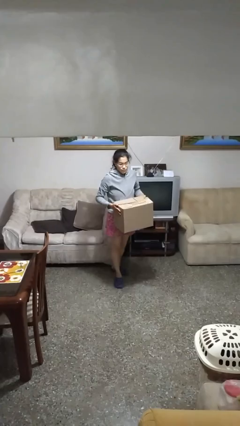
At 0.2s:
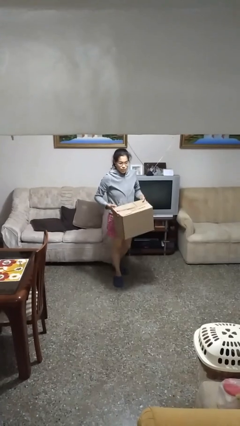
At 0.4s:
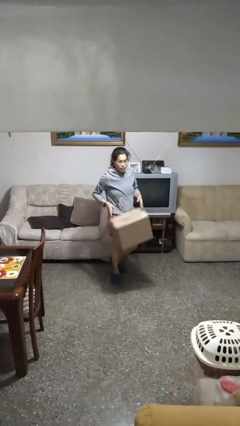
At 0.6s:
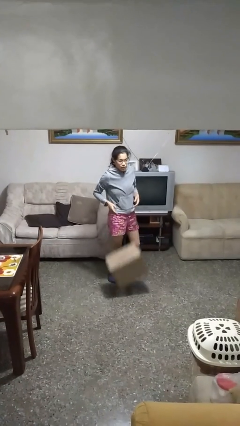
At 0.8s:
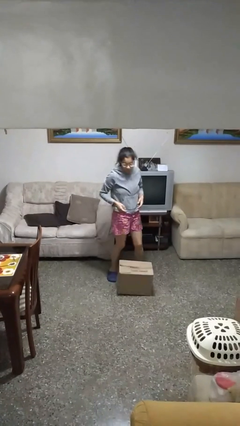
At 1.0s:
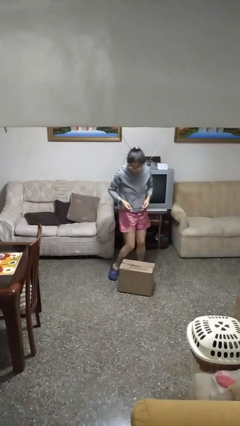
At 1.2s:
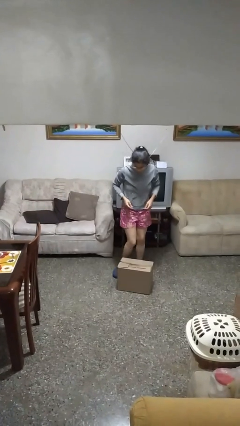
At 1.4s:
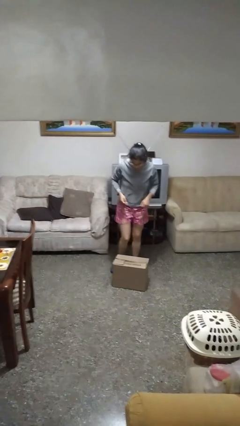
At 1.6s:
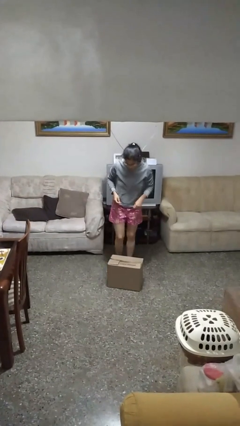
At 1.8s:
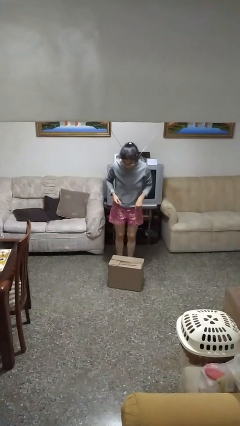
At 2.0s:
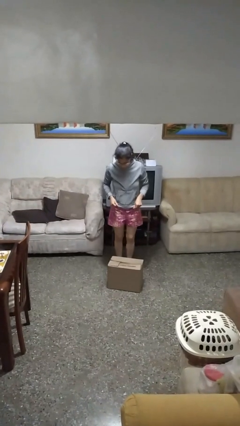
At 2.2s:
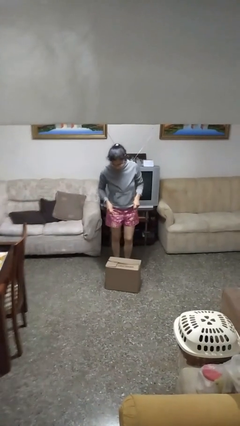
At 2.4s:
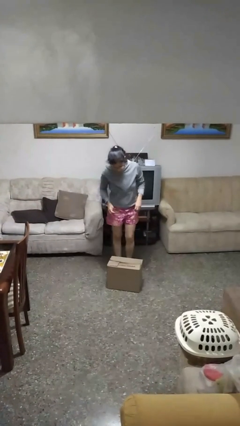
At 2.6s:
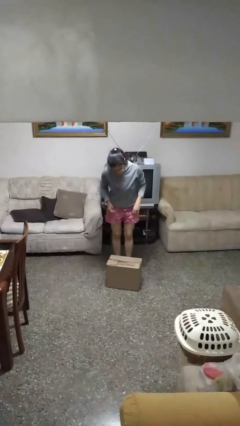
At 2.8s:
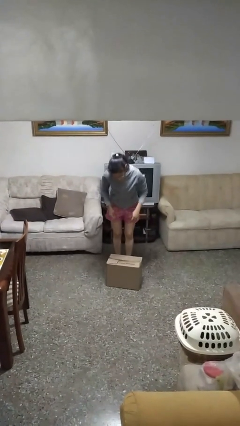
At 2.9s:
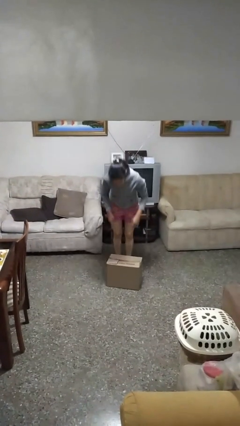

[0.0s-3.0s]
person drops object

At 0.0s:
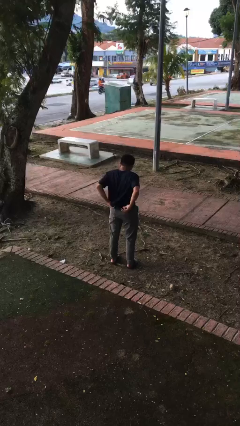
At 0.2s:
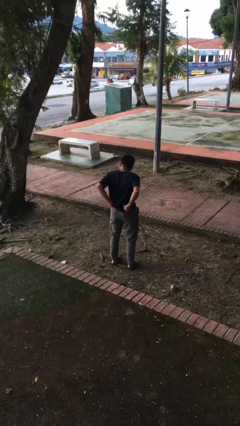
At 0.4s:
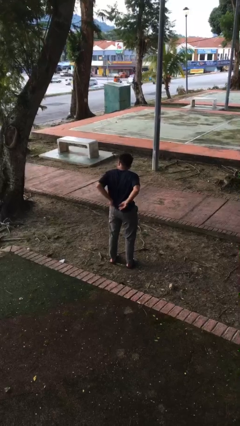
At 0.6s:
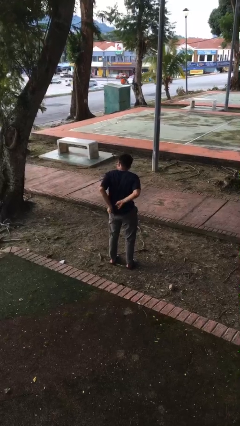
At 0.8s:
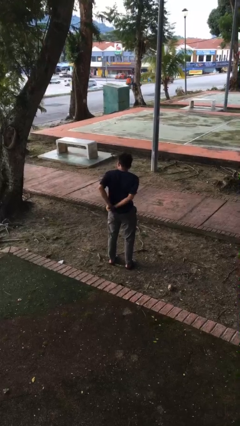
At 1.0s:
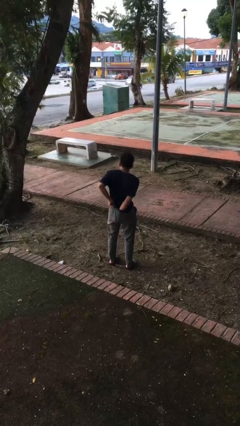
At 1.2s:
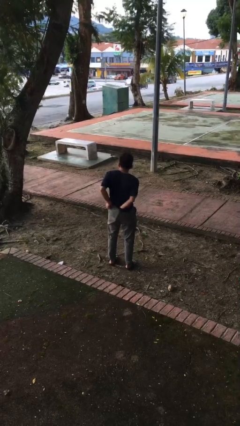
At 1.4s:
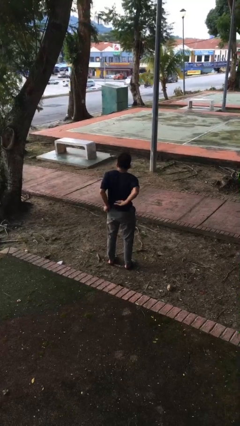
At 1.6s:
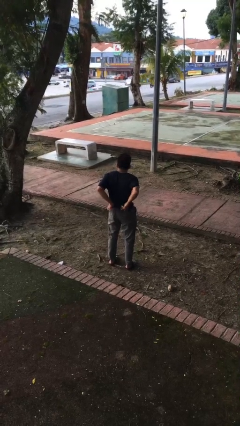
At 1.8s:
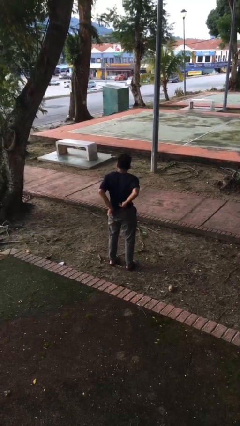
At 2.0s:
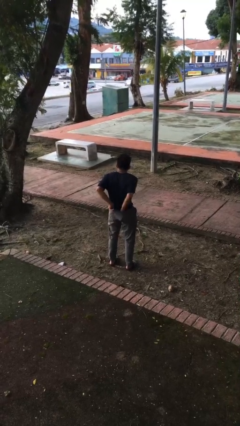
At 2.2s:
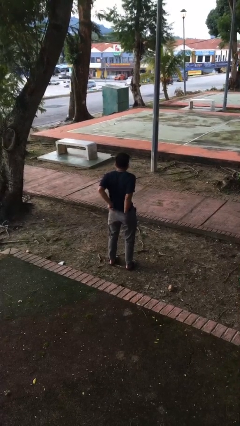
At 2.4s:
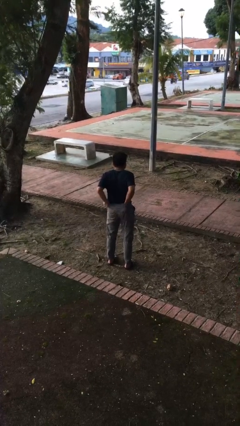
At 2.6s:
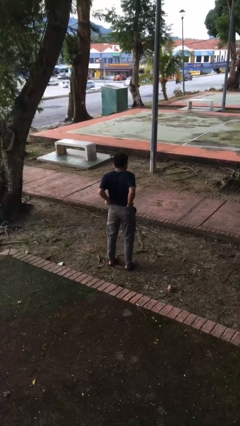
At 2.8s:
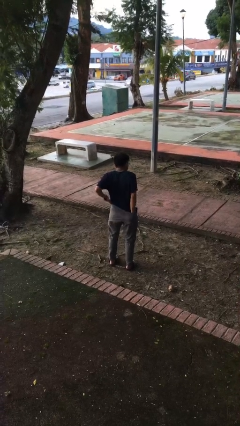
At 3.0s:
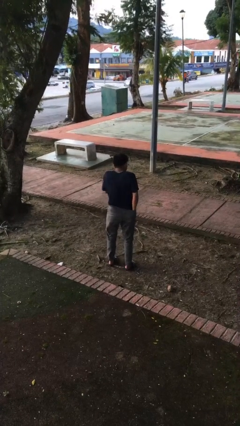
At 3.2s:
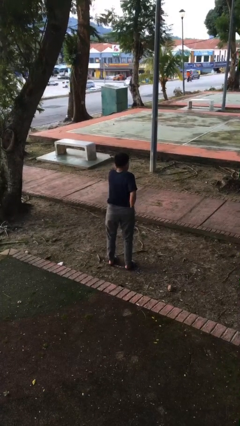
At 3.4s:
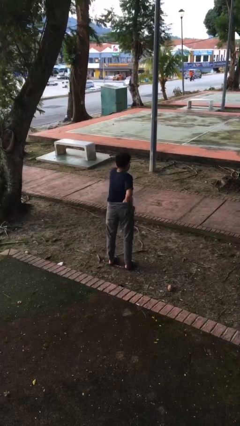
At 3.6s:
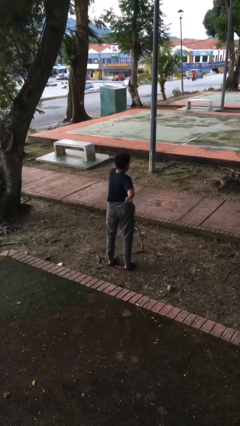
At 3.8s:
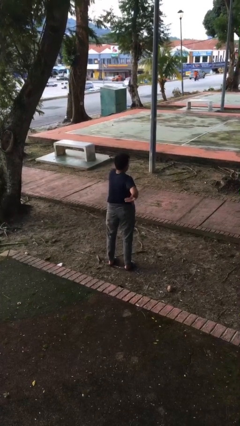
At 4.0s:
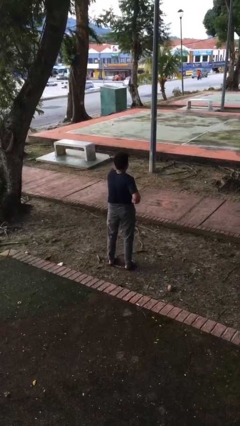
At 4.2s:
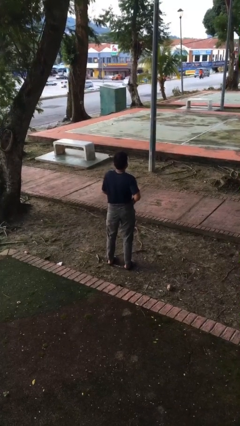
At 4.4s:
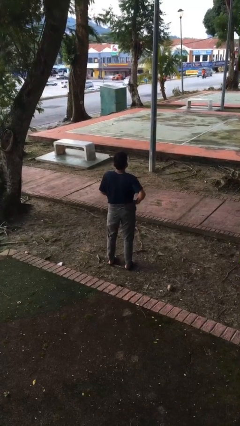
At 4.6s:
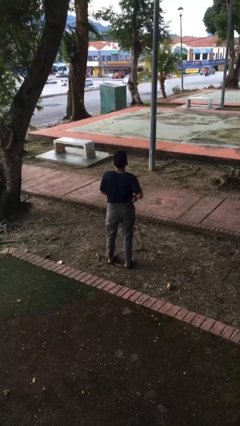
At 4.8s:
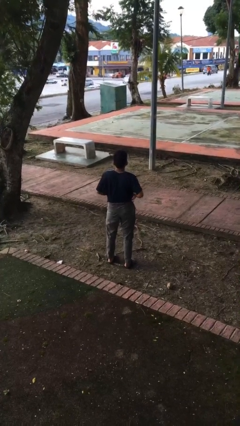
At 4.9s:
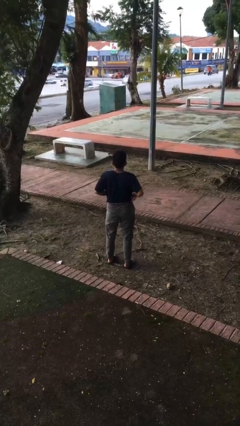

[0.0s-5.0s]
person tucks in shirt

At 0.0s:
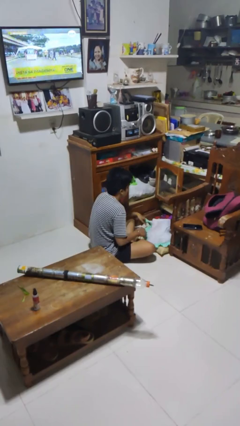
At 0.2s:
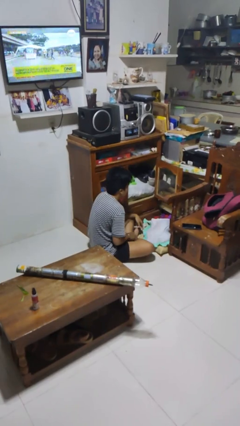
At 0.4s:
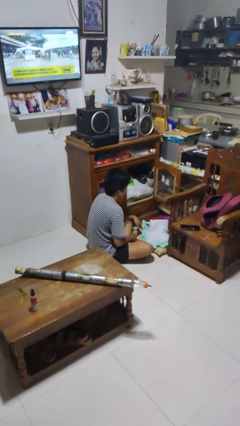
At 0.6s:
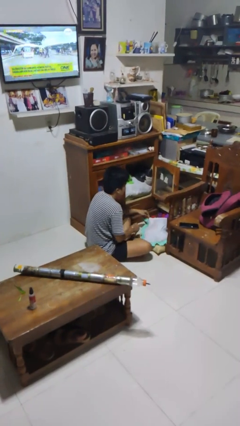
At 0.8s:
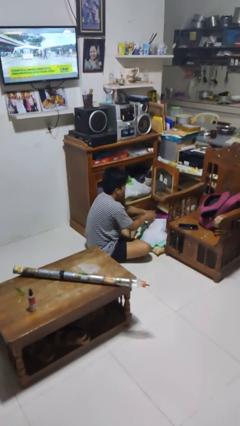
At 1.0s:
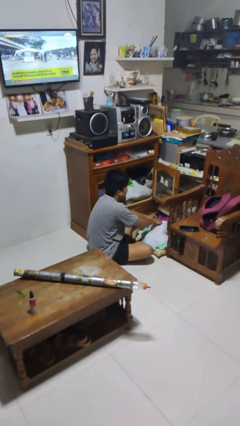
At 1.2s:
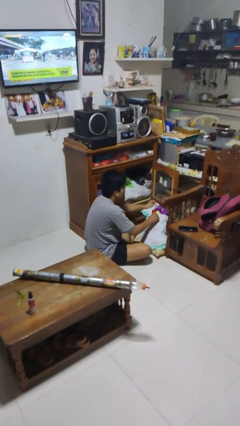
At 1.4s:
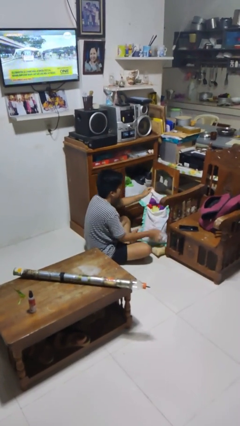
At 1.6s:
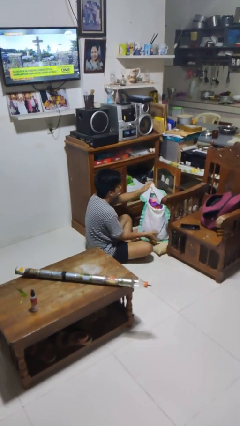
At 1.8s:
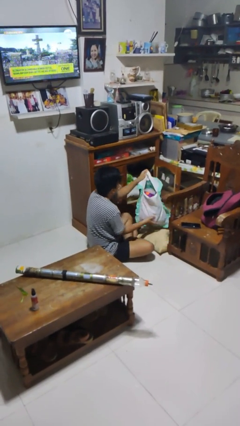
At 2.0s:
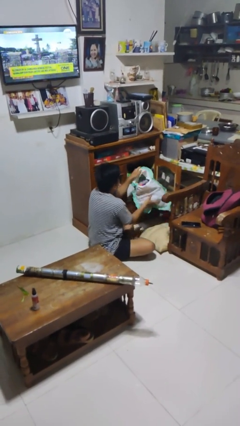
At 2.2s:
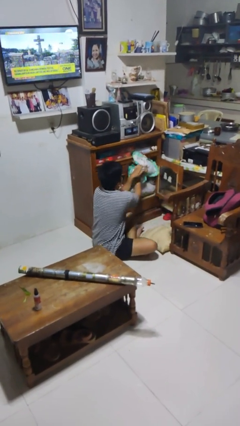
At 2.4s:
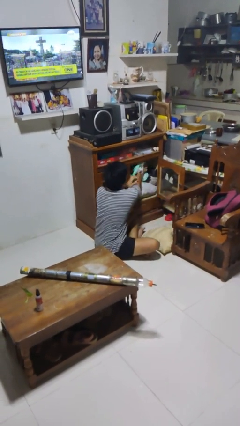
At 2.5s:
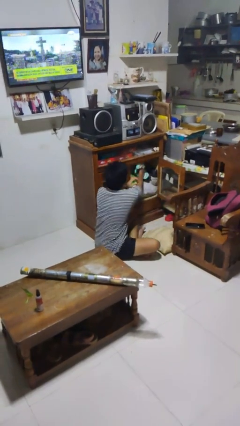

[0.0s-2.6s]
person takes clothes from dresser

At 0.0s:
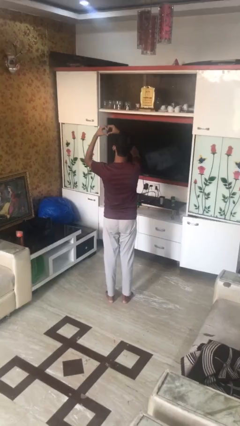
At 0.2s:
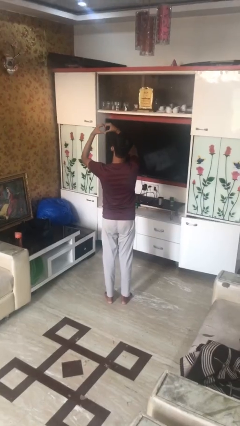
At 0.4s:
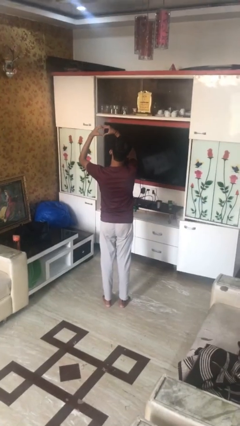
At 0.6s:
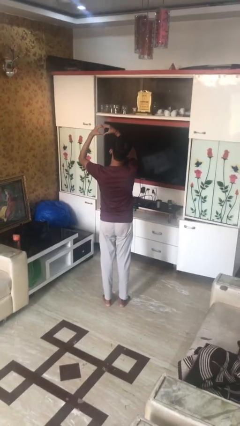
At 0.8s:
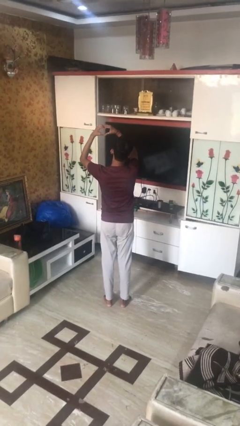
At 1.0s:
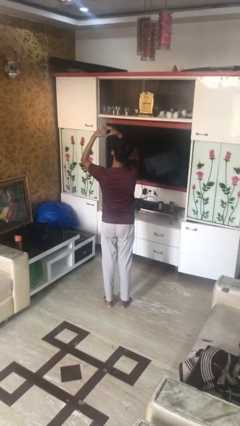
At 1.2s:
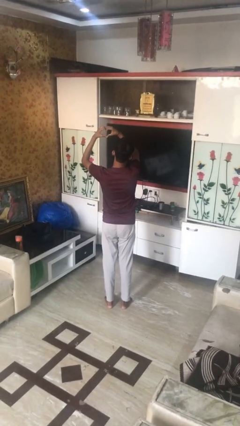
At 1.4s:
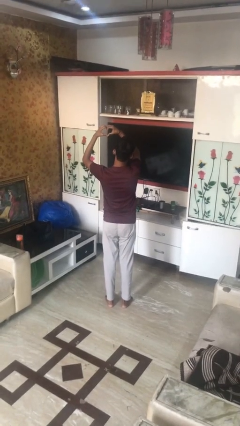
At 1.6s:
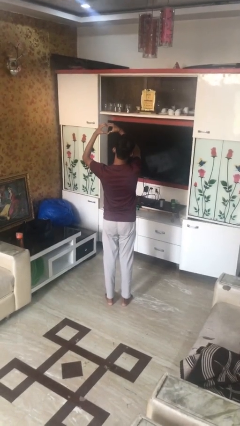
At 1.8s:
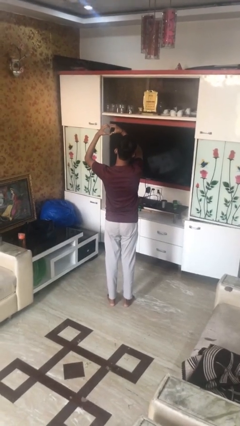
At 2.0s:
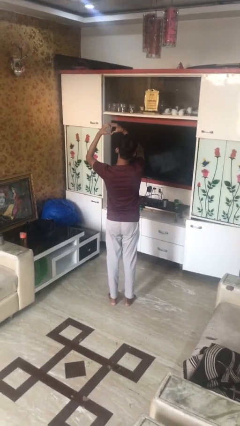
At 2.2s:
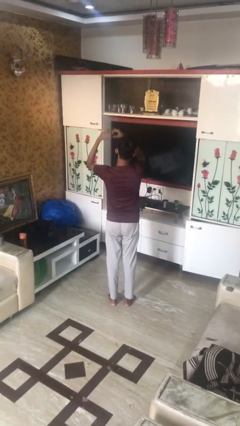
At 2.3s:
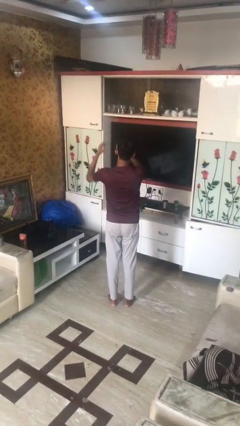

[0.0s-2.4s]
person gestures heart

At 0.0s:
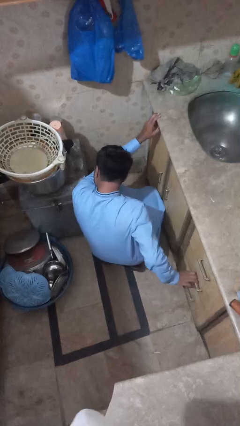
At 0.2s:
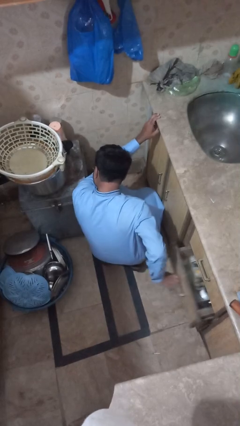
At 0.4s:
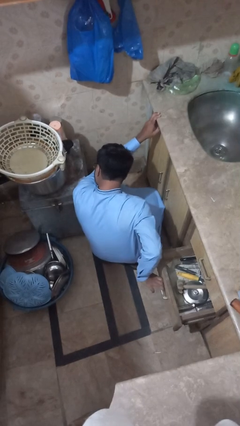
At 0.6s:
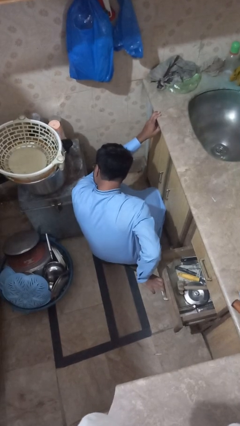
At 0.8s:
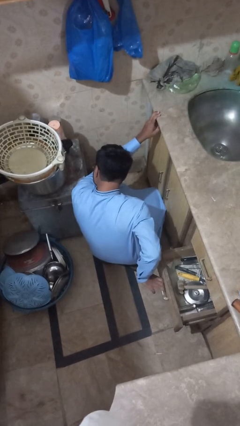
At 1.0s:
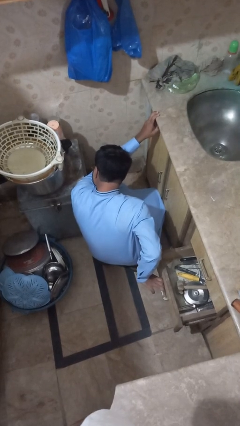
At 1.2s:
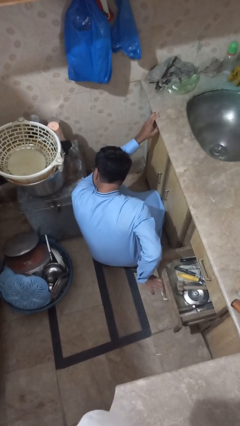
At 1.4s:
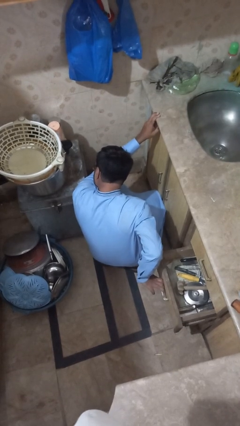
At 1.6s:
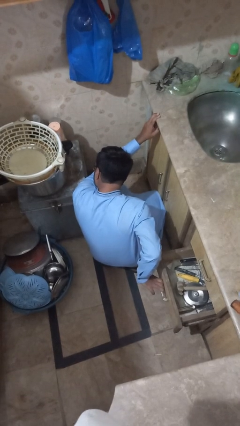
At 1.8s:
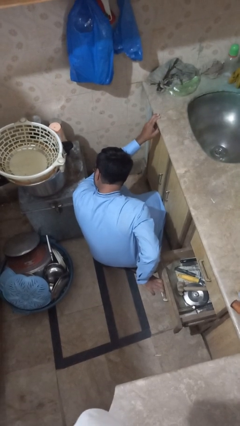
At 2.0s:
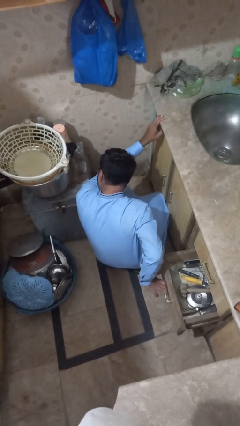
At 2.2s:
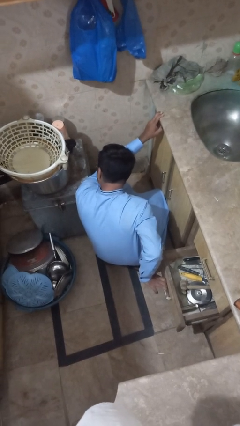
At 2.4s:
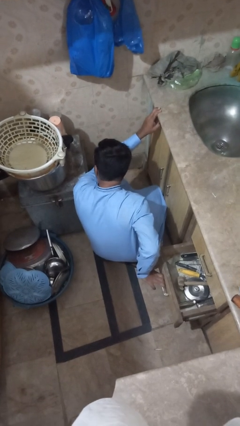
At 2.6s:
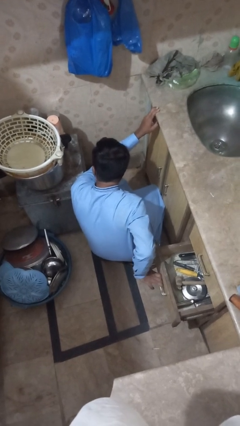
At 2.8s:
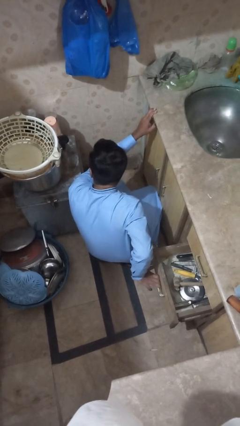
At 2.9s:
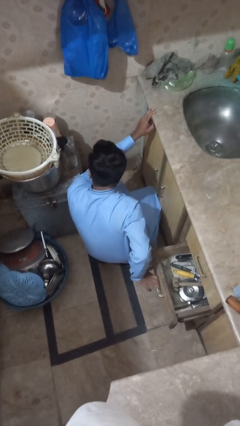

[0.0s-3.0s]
person opens kitchen drawer

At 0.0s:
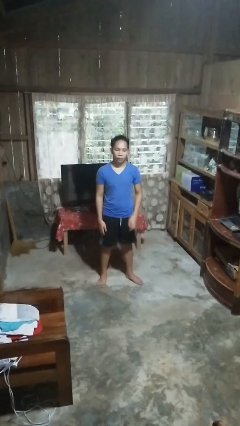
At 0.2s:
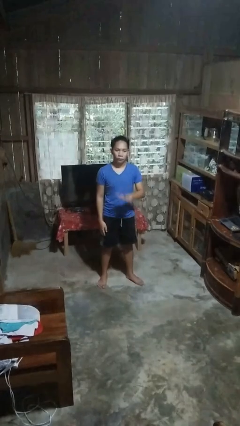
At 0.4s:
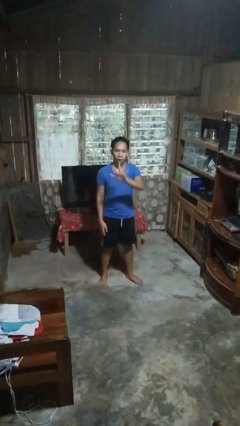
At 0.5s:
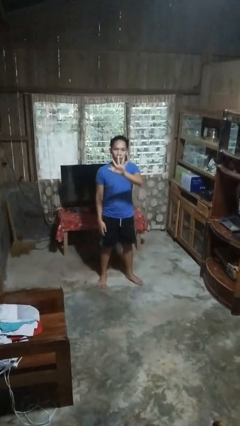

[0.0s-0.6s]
person gestures number five

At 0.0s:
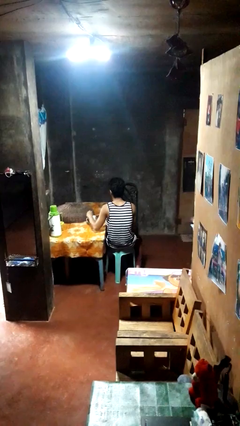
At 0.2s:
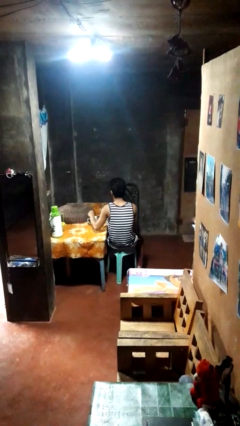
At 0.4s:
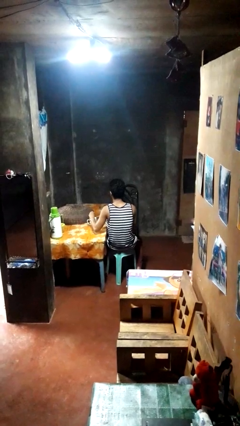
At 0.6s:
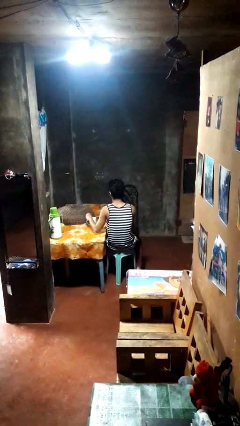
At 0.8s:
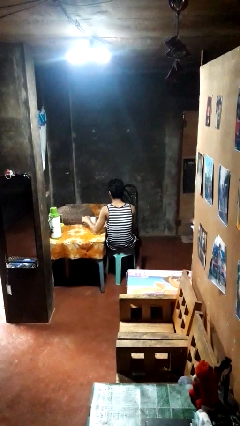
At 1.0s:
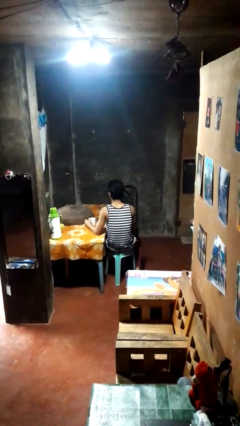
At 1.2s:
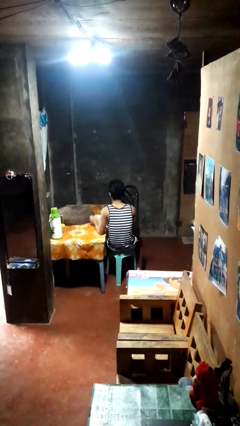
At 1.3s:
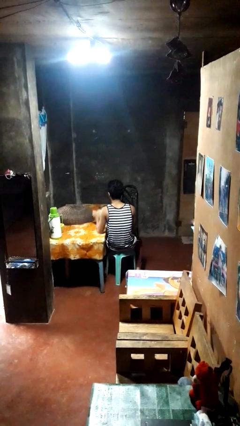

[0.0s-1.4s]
person stirs mug
